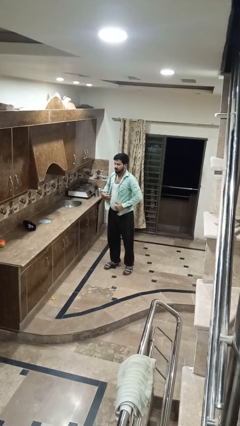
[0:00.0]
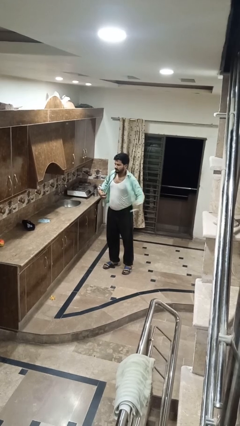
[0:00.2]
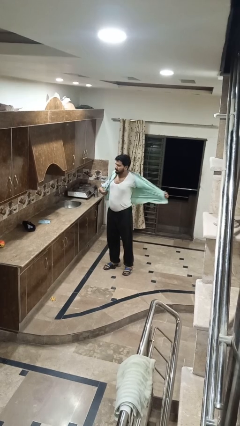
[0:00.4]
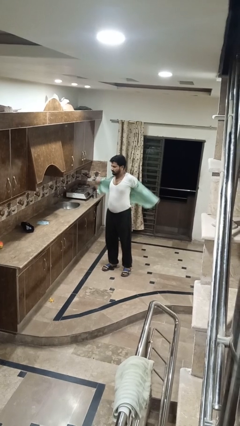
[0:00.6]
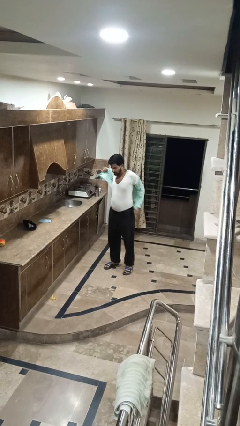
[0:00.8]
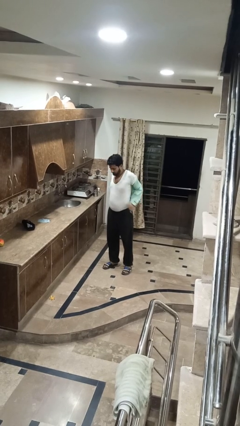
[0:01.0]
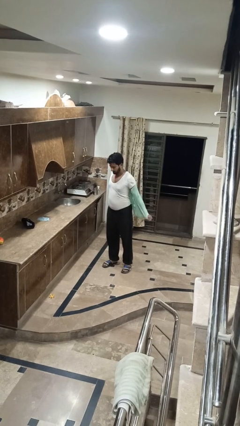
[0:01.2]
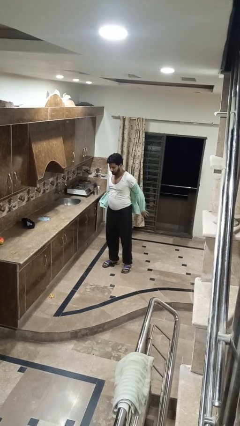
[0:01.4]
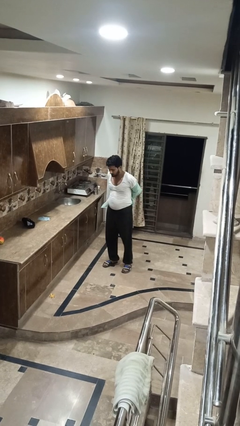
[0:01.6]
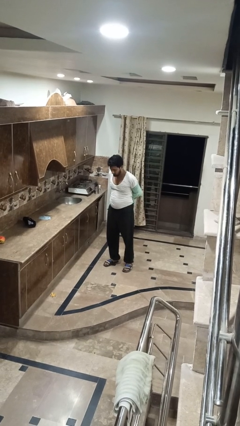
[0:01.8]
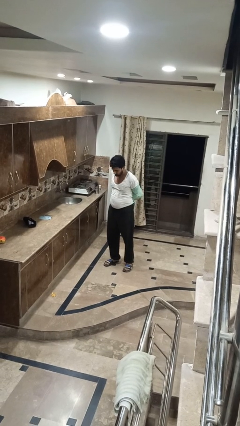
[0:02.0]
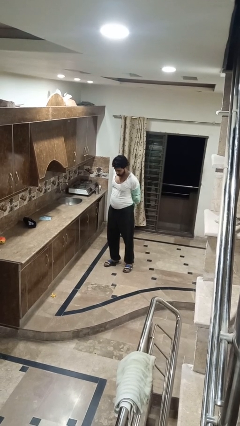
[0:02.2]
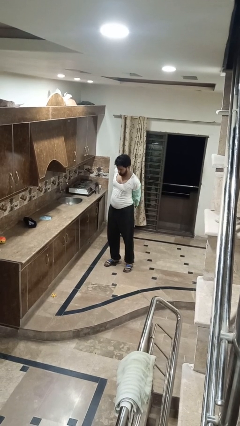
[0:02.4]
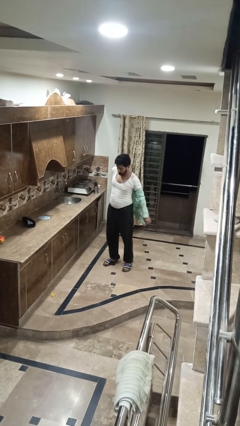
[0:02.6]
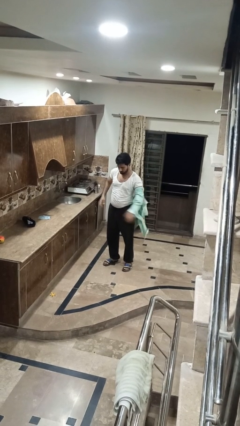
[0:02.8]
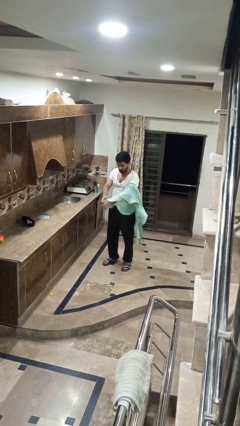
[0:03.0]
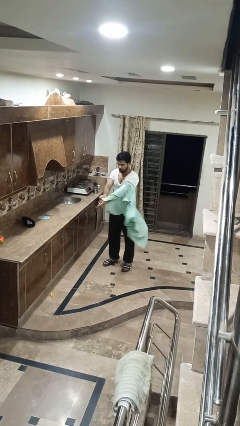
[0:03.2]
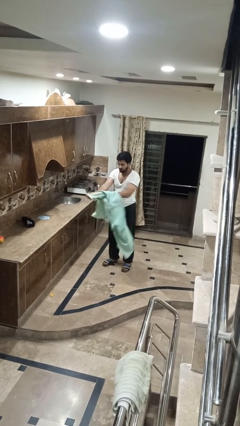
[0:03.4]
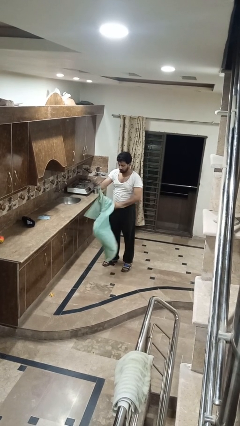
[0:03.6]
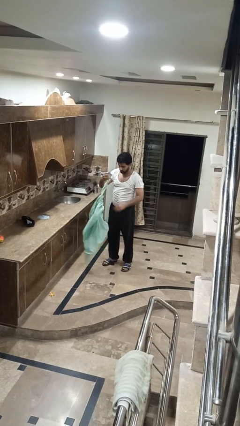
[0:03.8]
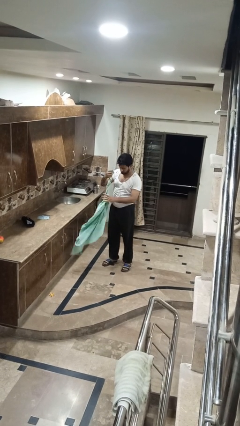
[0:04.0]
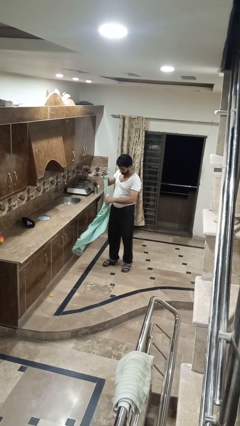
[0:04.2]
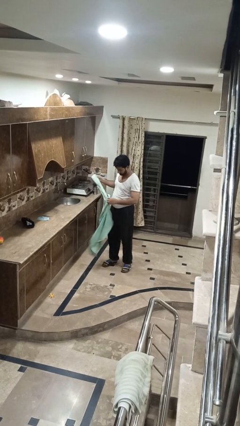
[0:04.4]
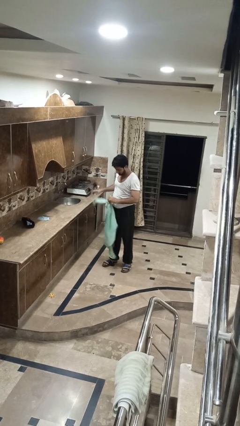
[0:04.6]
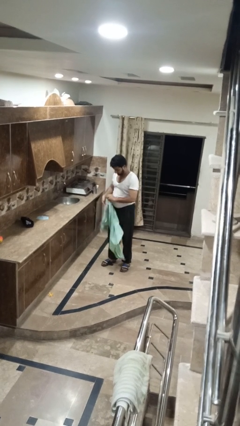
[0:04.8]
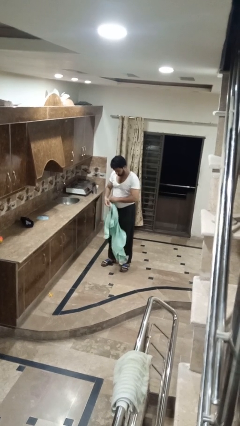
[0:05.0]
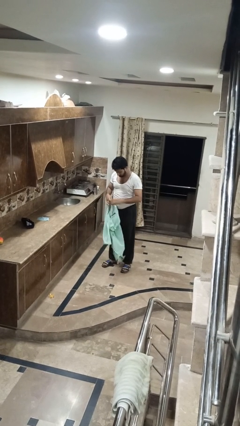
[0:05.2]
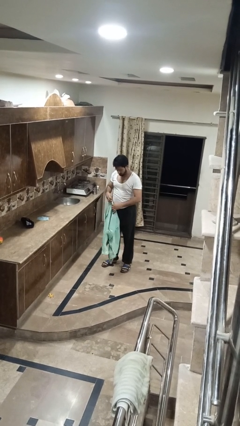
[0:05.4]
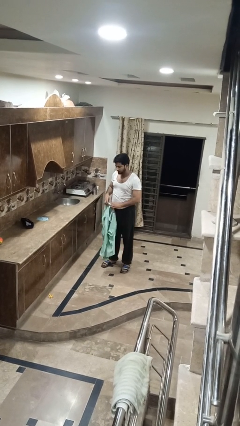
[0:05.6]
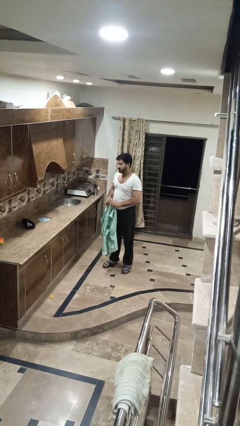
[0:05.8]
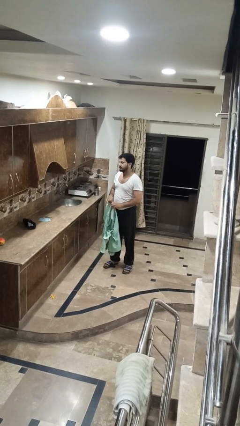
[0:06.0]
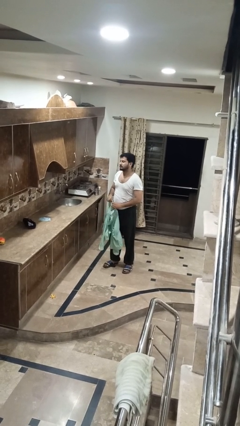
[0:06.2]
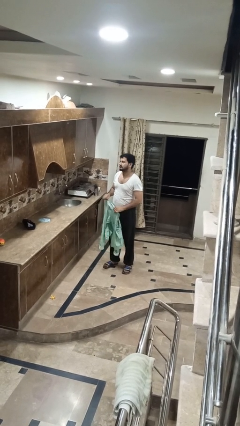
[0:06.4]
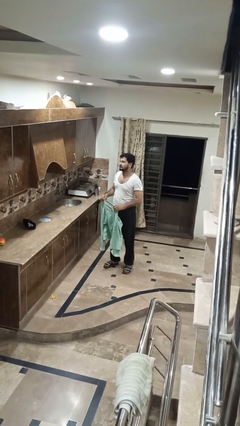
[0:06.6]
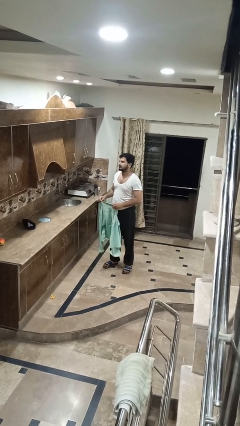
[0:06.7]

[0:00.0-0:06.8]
person takes off shirt

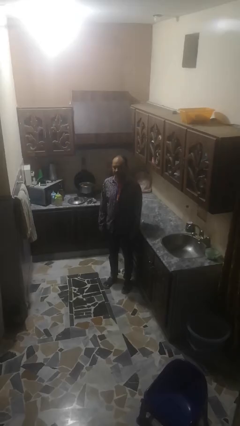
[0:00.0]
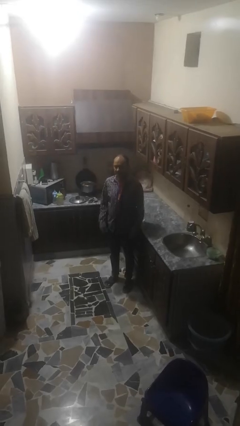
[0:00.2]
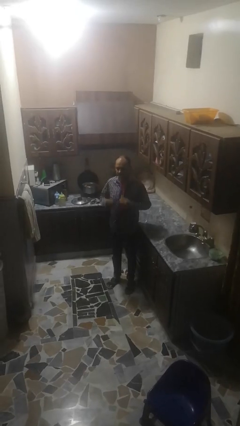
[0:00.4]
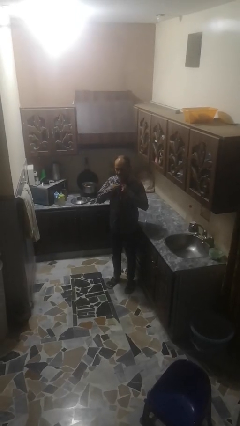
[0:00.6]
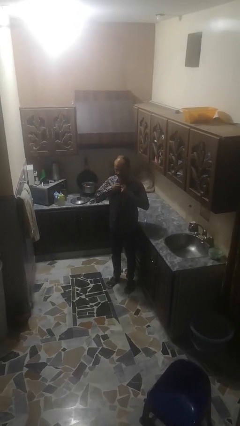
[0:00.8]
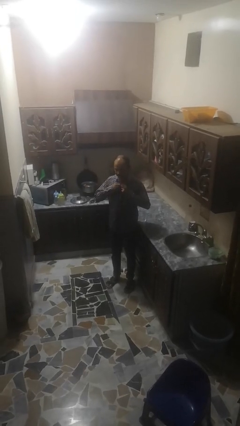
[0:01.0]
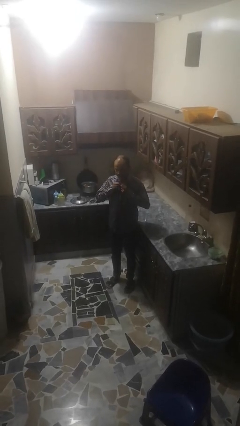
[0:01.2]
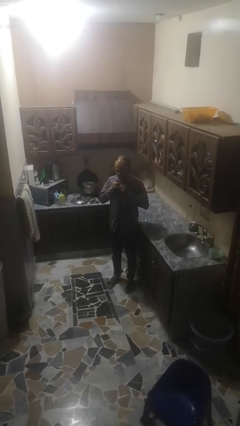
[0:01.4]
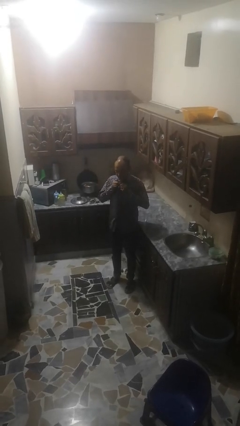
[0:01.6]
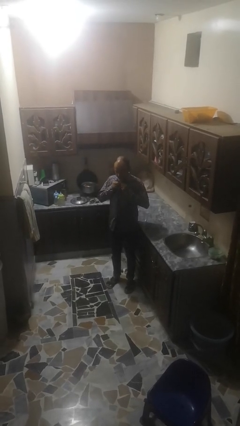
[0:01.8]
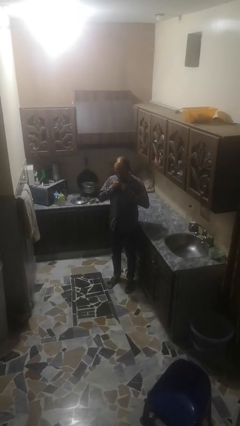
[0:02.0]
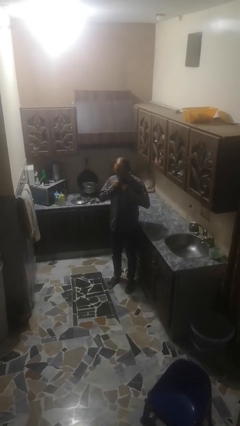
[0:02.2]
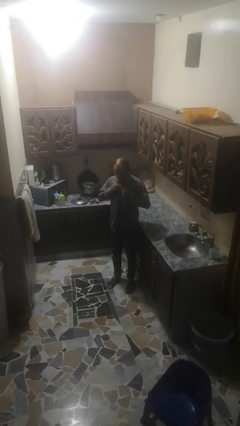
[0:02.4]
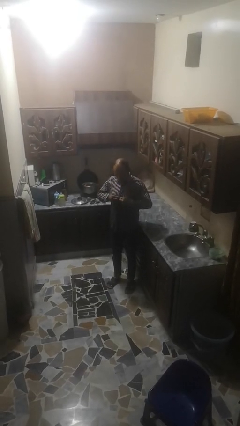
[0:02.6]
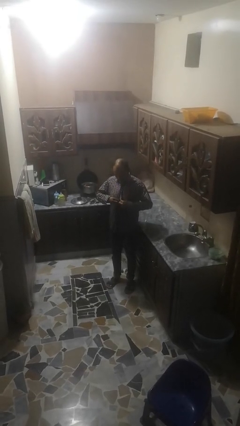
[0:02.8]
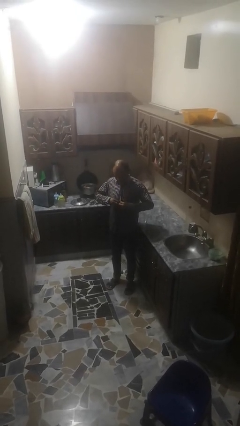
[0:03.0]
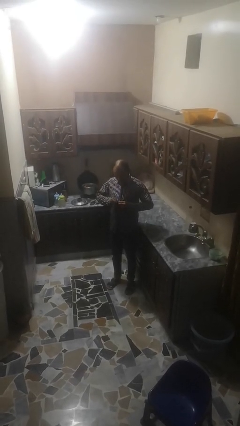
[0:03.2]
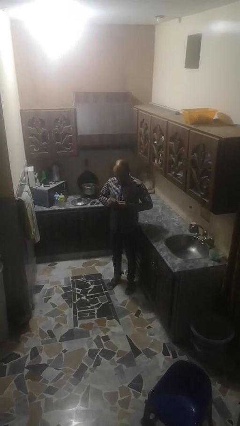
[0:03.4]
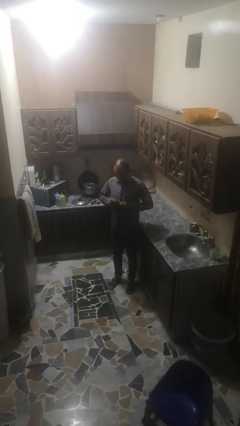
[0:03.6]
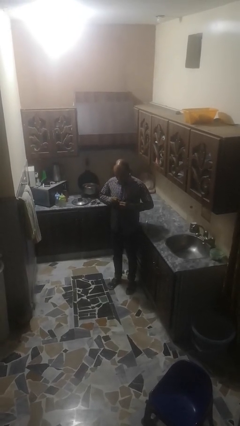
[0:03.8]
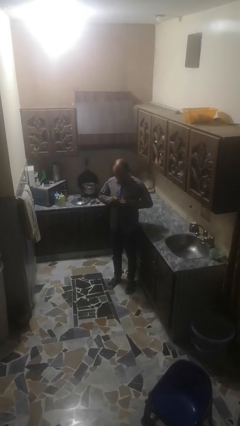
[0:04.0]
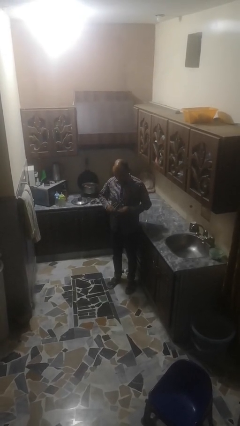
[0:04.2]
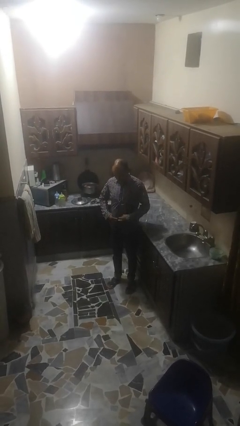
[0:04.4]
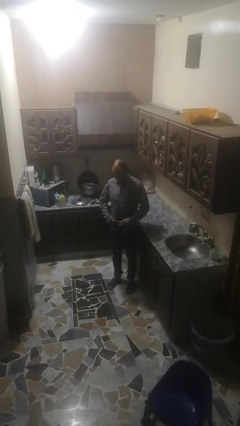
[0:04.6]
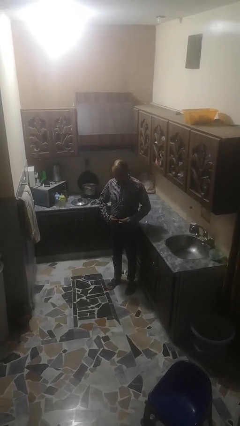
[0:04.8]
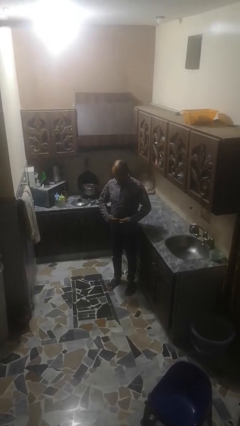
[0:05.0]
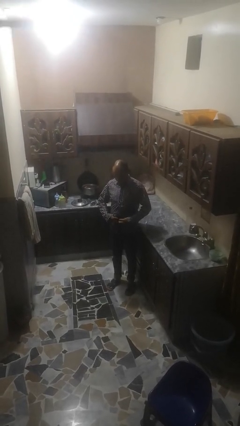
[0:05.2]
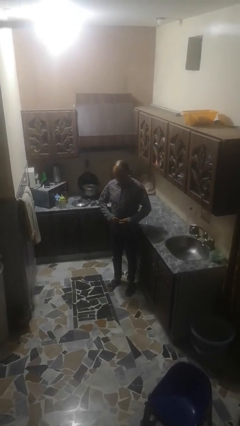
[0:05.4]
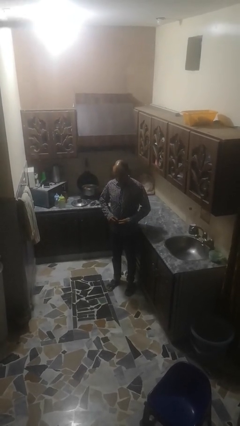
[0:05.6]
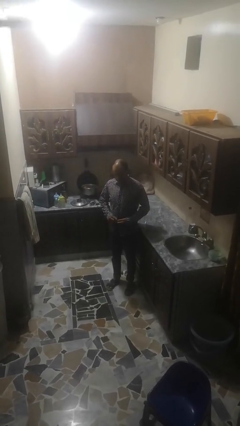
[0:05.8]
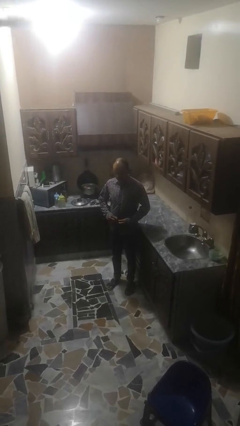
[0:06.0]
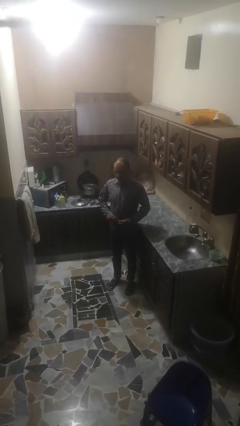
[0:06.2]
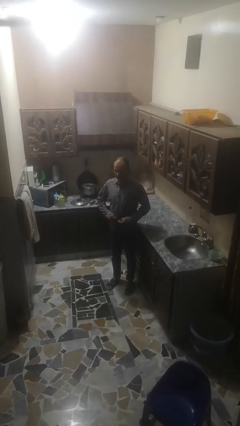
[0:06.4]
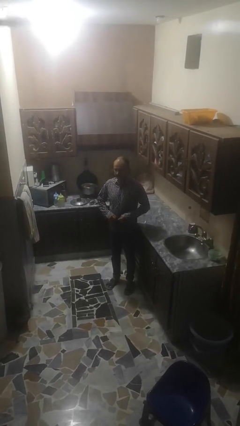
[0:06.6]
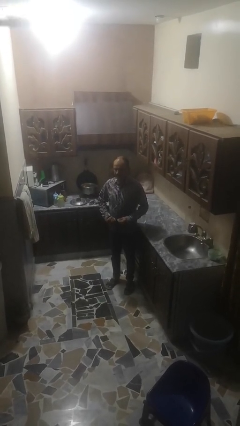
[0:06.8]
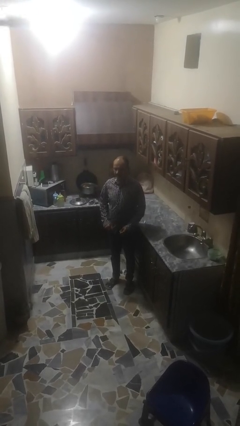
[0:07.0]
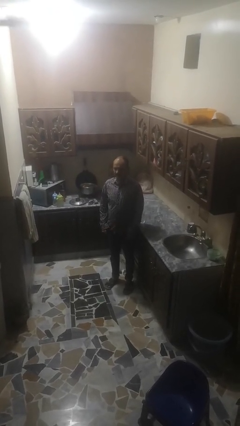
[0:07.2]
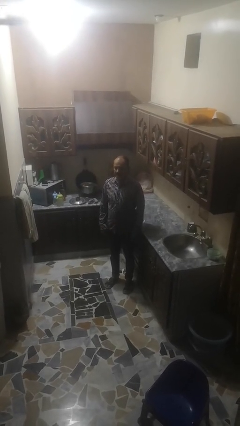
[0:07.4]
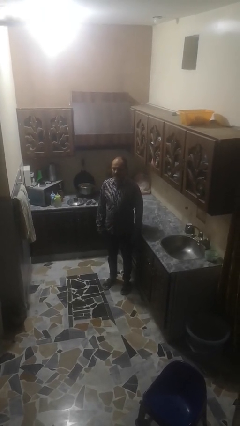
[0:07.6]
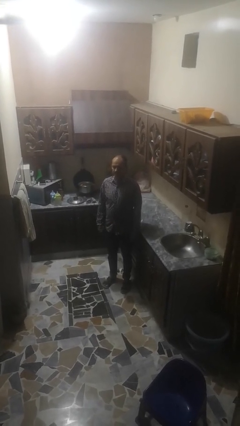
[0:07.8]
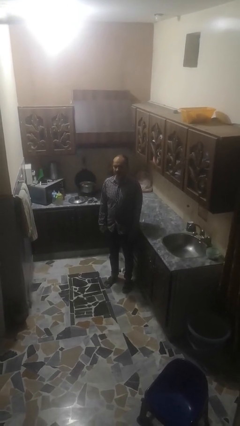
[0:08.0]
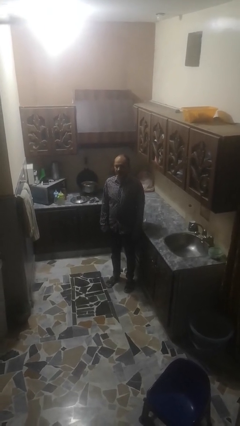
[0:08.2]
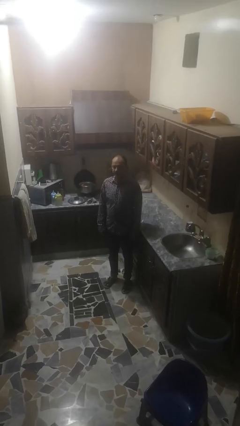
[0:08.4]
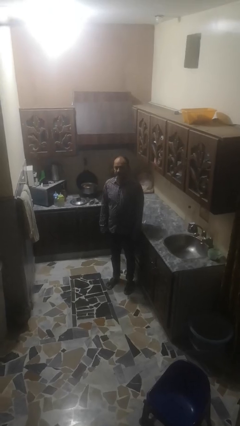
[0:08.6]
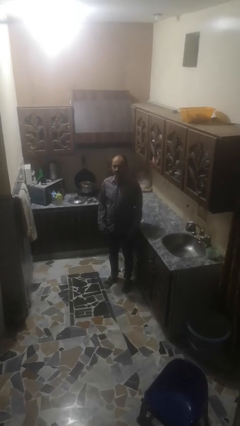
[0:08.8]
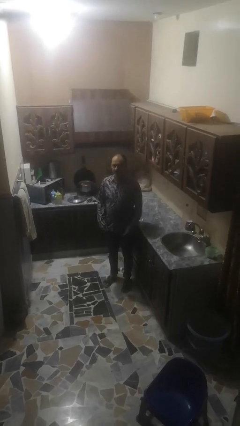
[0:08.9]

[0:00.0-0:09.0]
person buttons shirt

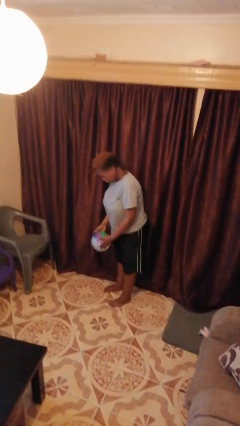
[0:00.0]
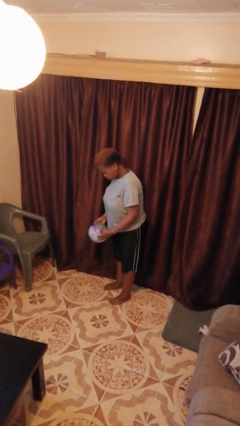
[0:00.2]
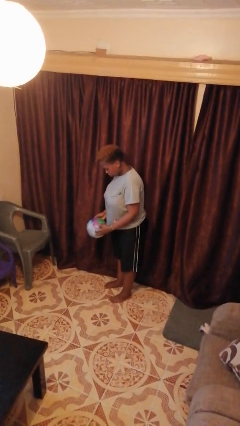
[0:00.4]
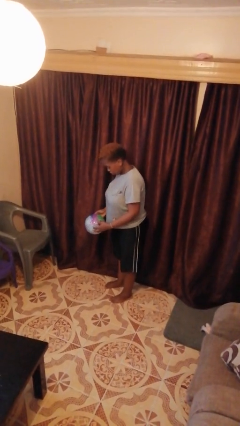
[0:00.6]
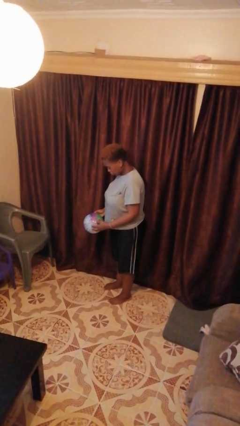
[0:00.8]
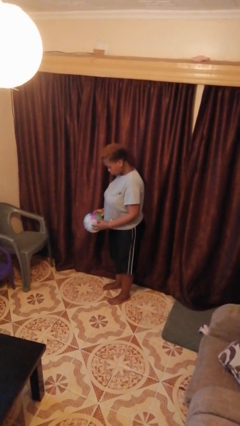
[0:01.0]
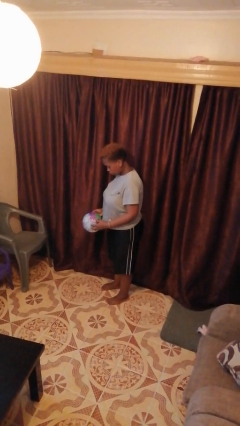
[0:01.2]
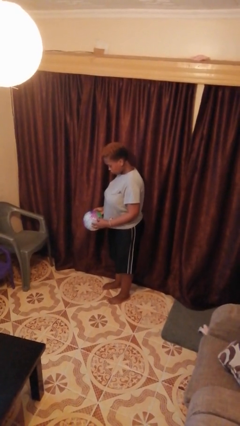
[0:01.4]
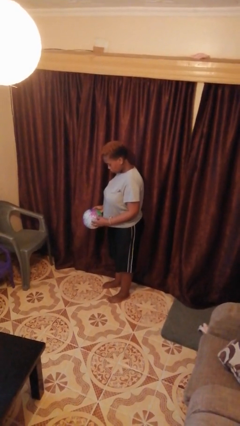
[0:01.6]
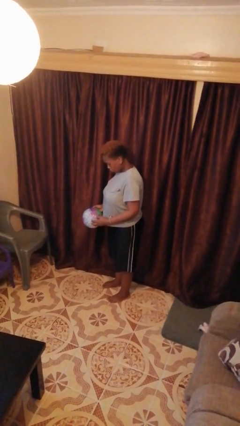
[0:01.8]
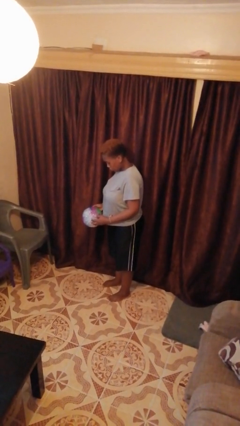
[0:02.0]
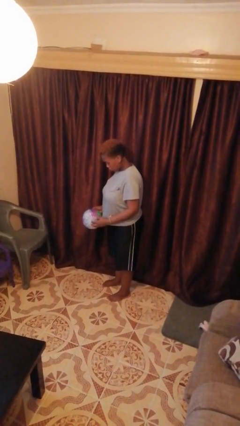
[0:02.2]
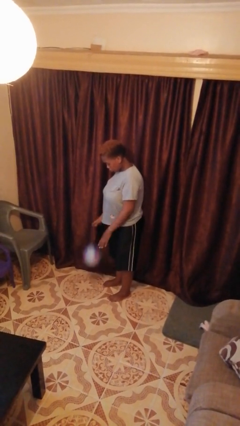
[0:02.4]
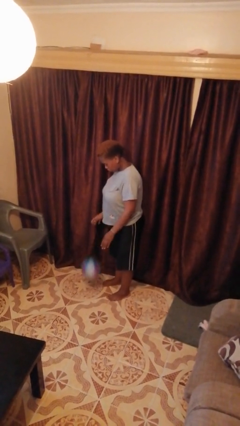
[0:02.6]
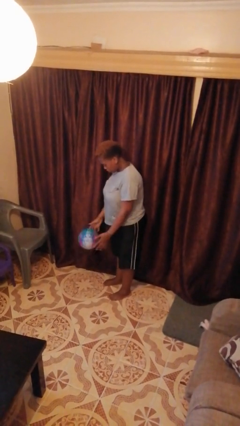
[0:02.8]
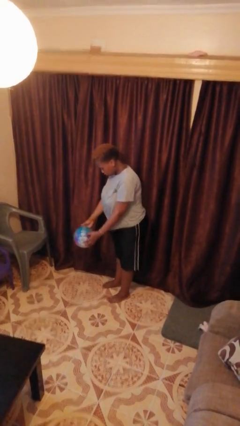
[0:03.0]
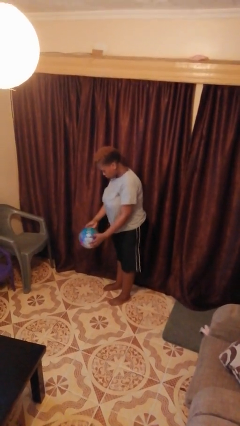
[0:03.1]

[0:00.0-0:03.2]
person bounces ball on floor
